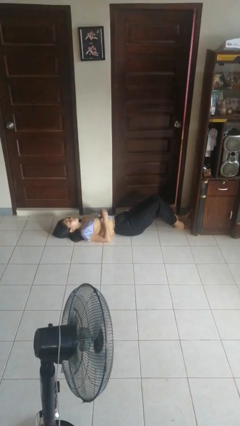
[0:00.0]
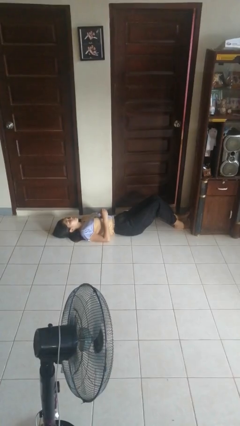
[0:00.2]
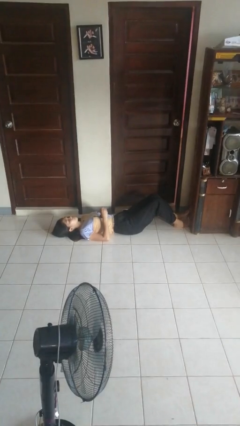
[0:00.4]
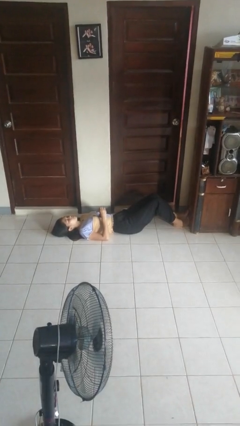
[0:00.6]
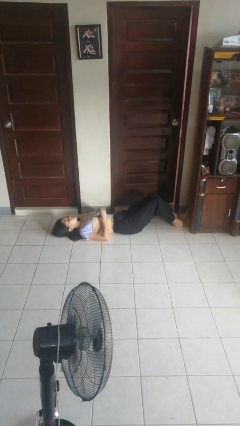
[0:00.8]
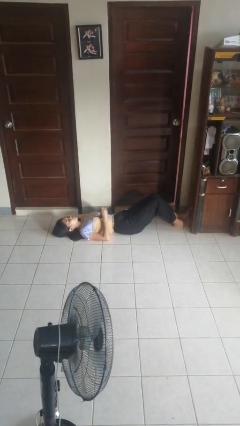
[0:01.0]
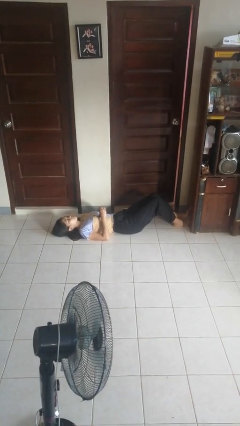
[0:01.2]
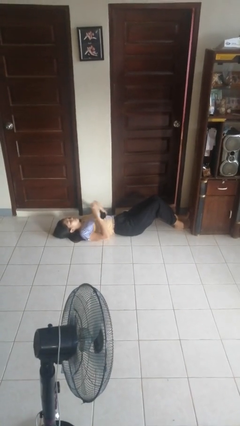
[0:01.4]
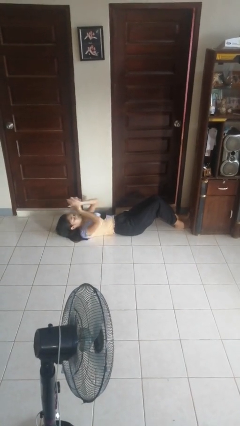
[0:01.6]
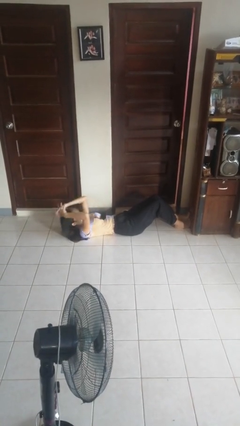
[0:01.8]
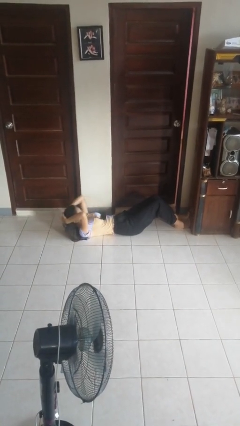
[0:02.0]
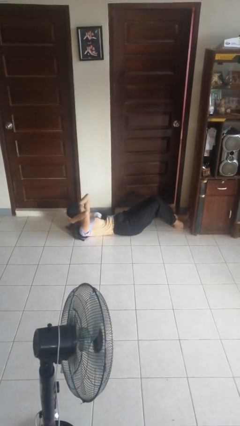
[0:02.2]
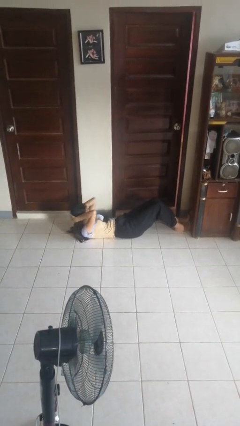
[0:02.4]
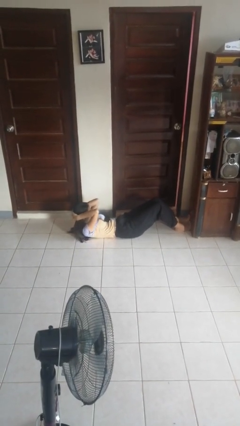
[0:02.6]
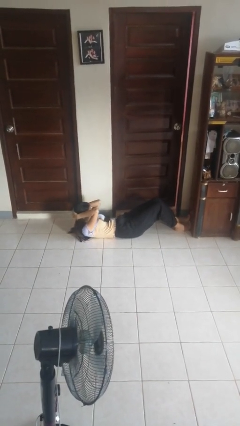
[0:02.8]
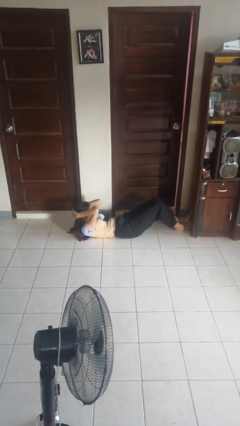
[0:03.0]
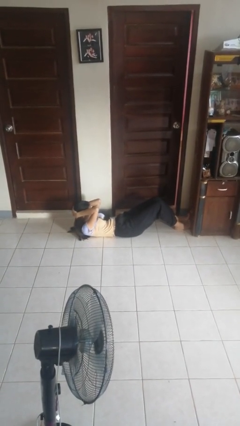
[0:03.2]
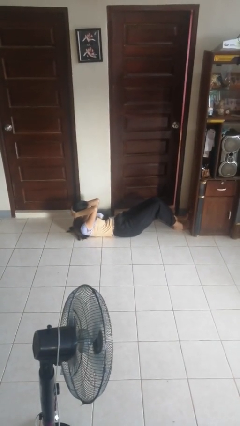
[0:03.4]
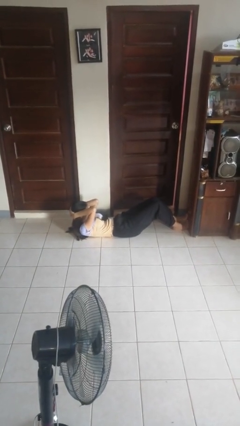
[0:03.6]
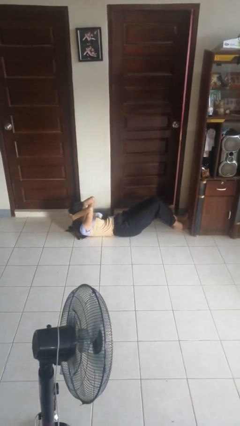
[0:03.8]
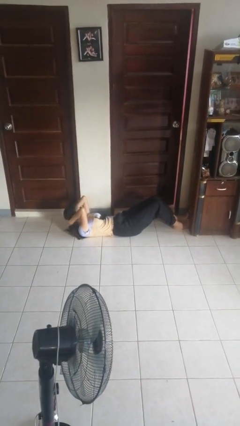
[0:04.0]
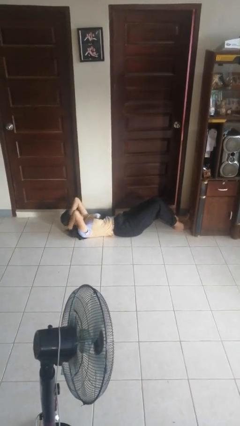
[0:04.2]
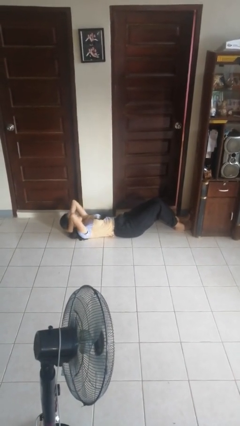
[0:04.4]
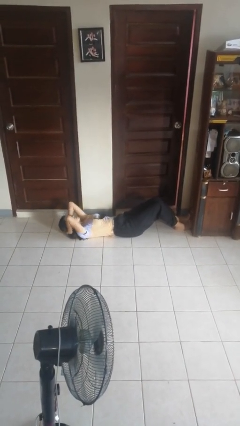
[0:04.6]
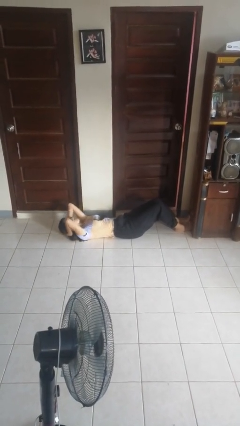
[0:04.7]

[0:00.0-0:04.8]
person exercises with situp

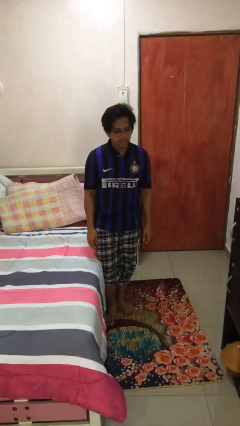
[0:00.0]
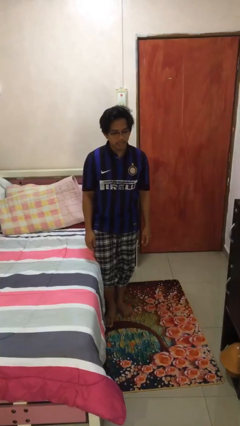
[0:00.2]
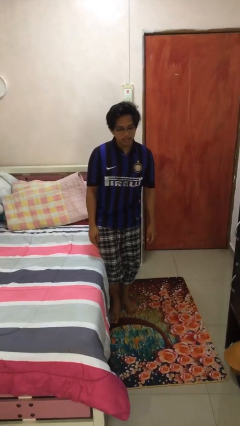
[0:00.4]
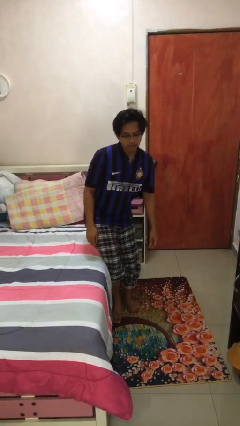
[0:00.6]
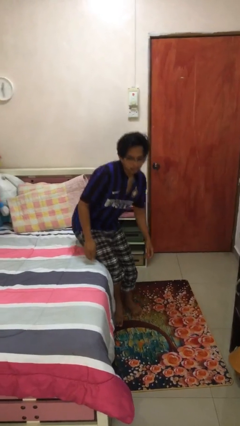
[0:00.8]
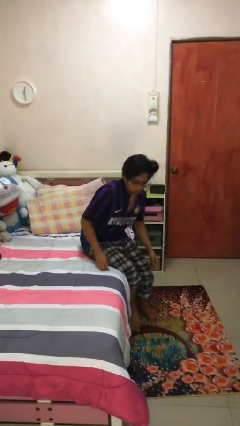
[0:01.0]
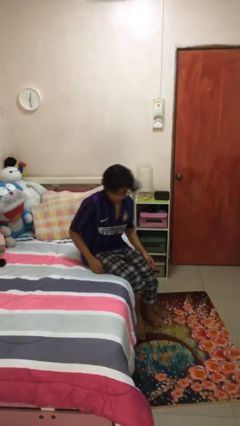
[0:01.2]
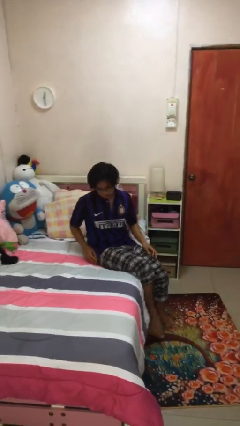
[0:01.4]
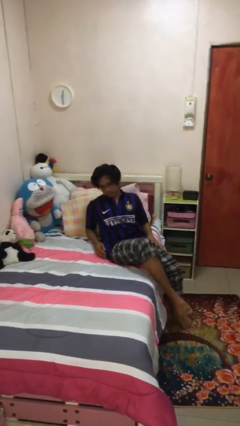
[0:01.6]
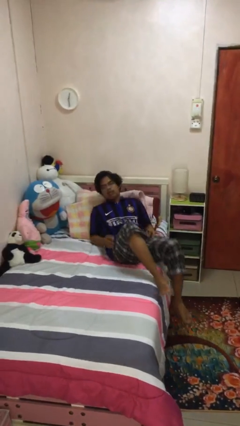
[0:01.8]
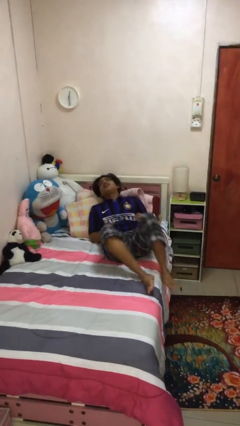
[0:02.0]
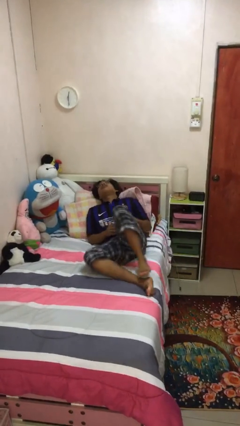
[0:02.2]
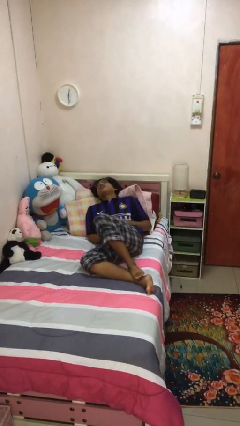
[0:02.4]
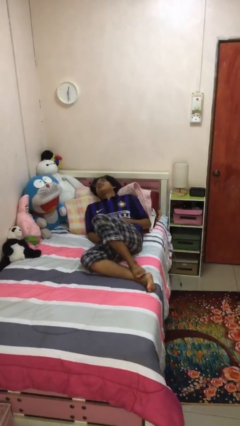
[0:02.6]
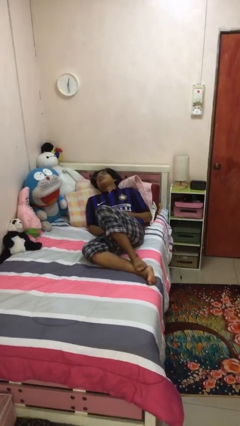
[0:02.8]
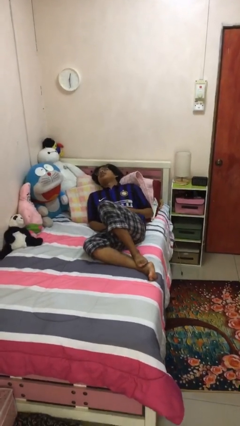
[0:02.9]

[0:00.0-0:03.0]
person lies down on bed

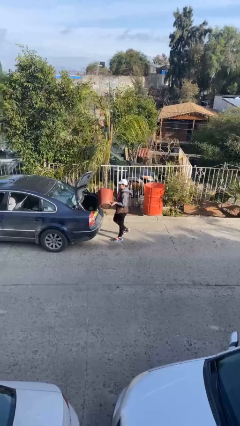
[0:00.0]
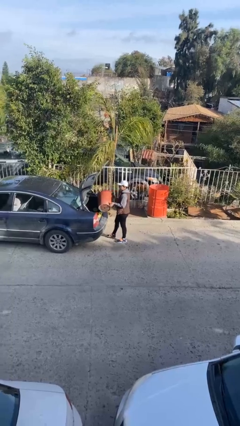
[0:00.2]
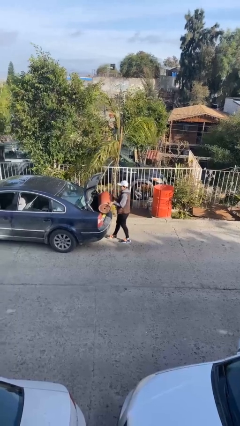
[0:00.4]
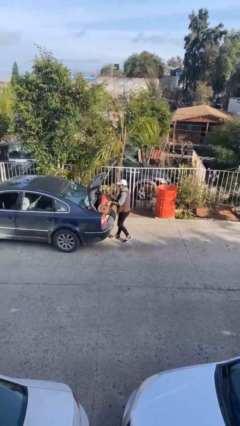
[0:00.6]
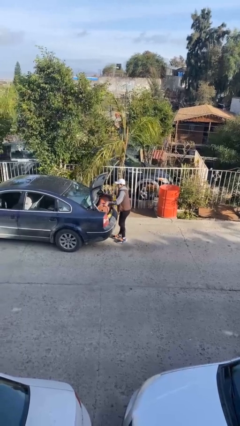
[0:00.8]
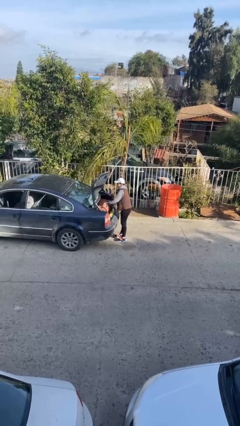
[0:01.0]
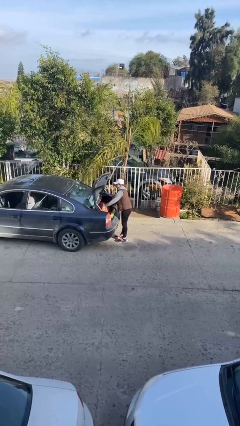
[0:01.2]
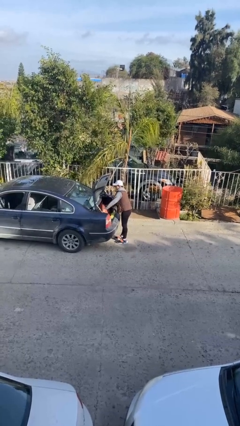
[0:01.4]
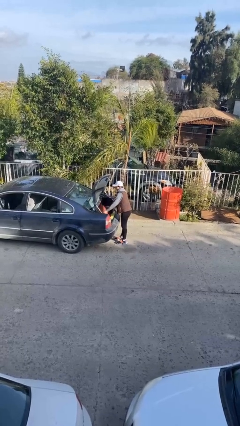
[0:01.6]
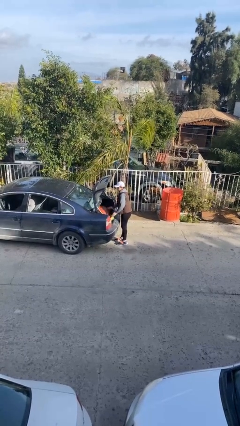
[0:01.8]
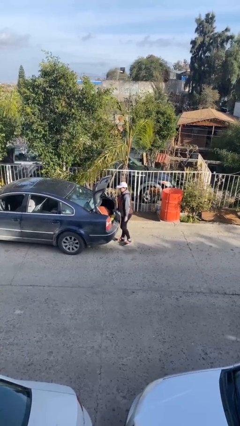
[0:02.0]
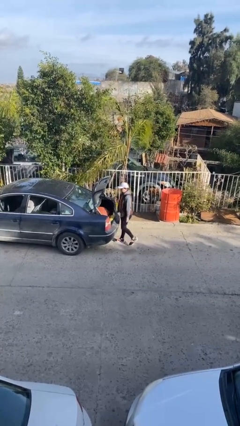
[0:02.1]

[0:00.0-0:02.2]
person loads car

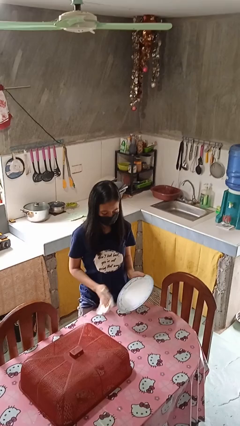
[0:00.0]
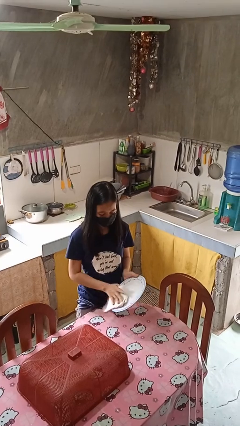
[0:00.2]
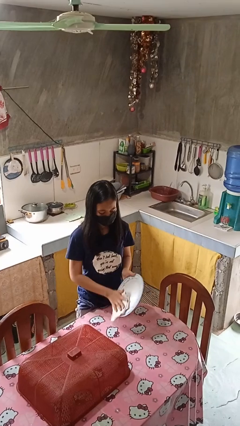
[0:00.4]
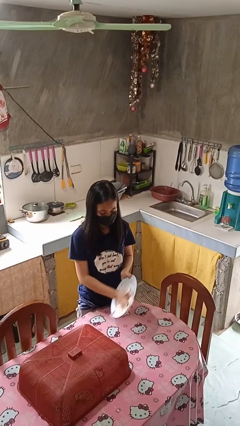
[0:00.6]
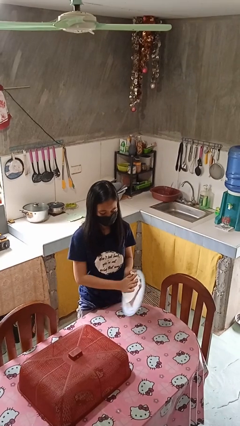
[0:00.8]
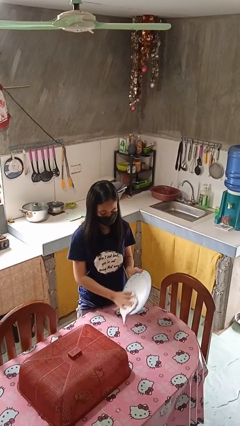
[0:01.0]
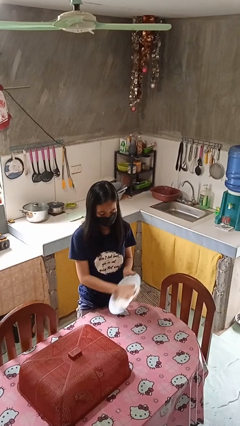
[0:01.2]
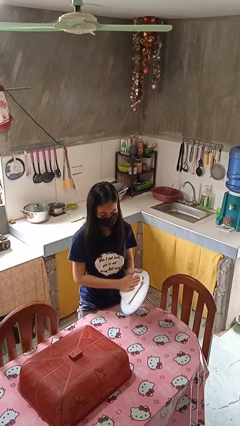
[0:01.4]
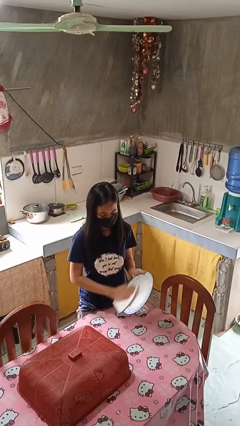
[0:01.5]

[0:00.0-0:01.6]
person dries dish

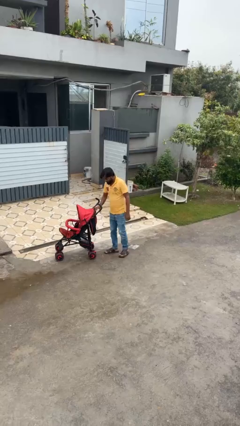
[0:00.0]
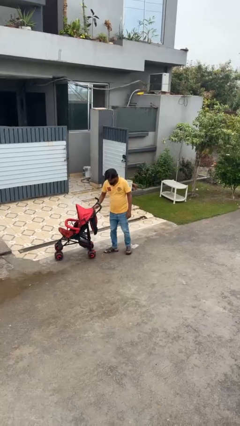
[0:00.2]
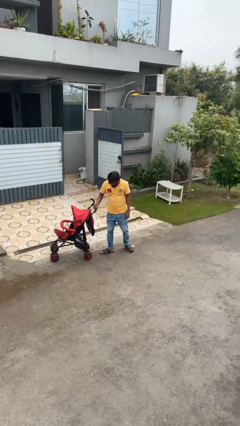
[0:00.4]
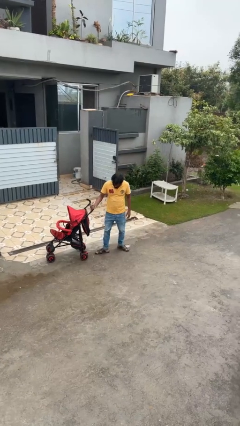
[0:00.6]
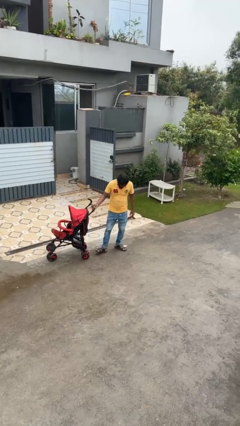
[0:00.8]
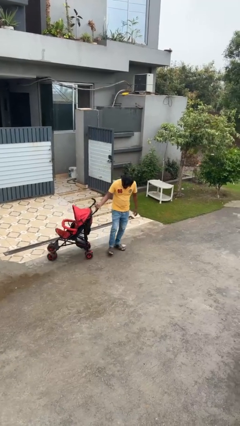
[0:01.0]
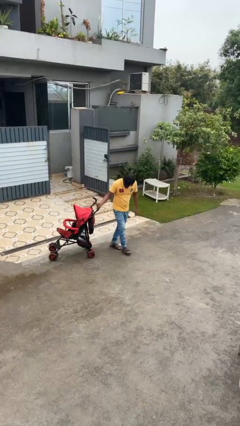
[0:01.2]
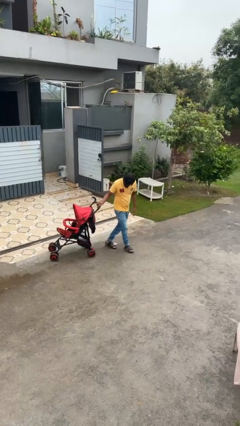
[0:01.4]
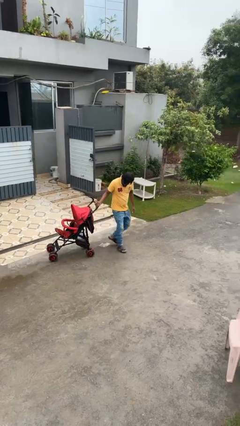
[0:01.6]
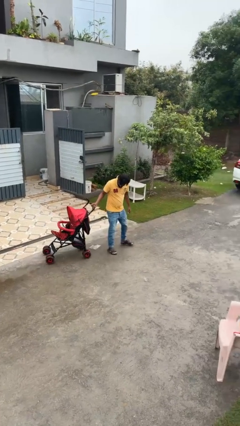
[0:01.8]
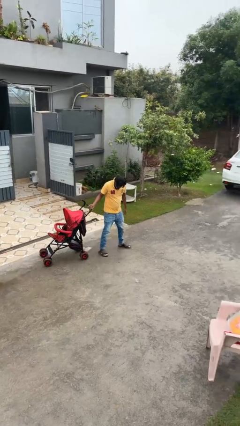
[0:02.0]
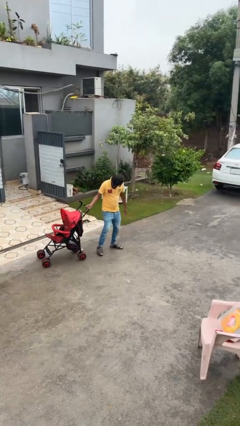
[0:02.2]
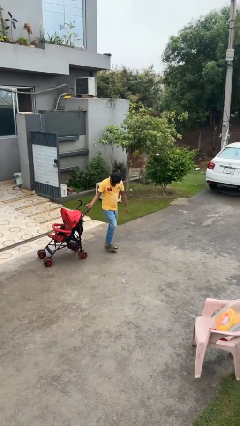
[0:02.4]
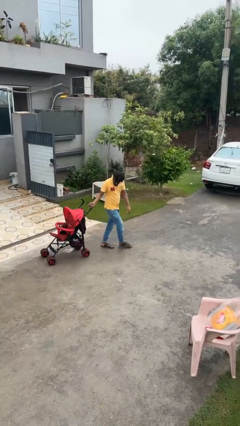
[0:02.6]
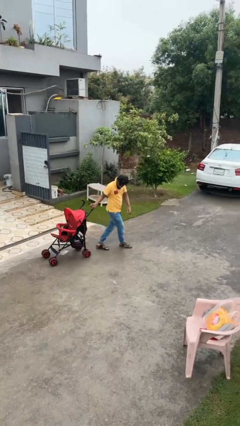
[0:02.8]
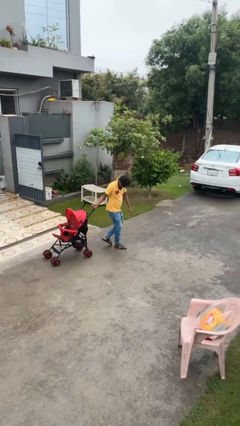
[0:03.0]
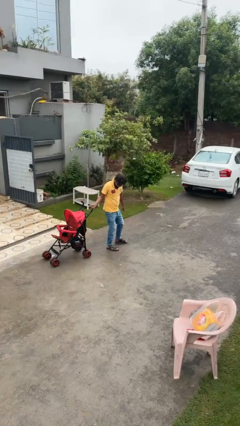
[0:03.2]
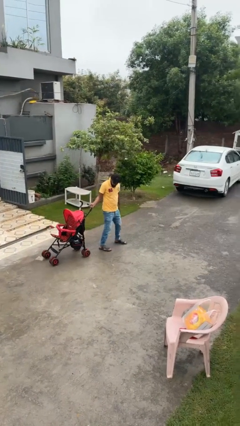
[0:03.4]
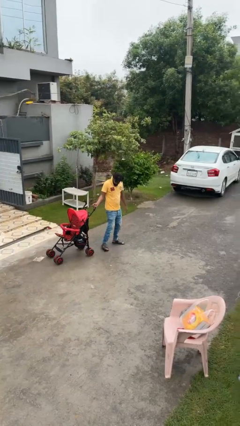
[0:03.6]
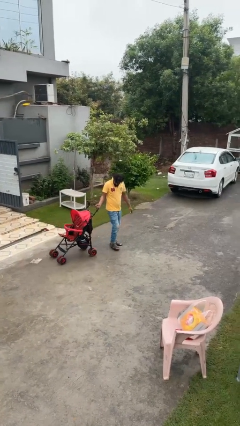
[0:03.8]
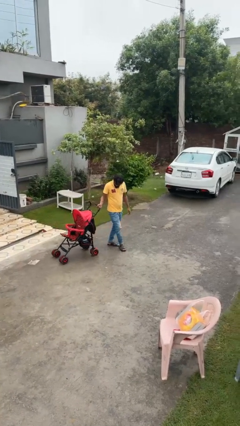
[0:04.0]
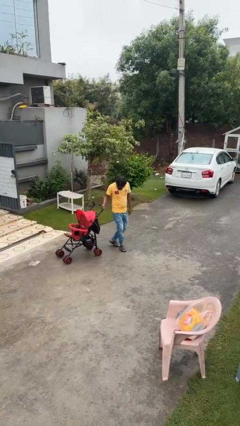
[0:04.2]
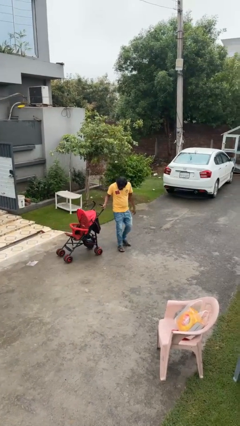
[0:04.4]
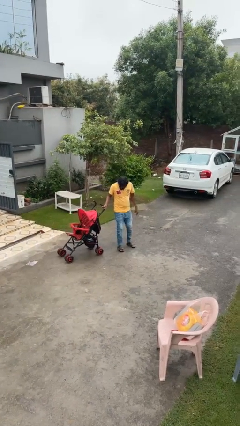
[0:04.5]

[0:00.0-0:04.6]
person pulls wheeled cart

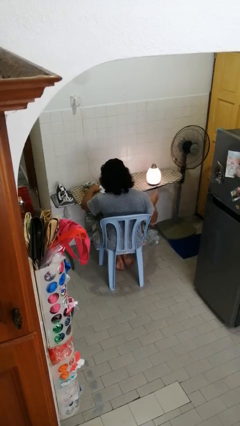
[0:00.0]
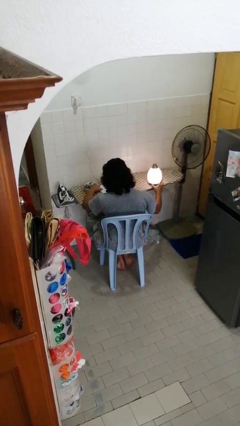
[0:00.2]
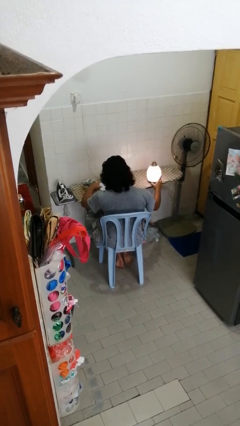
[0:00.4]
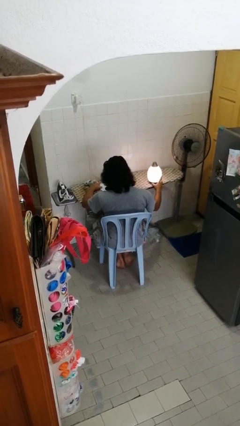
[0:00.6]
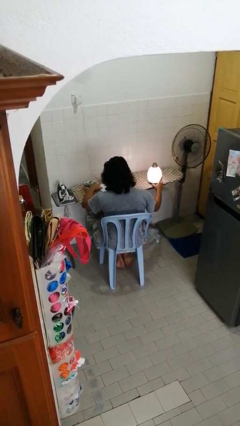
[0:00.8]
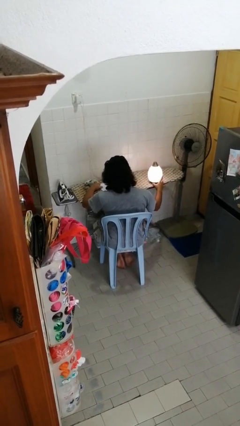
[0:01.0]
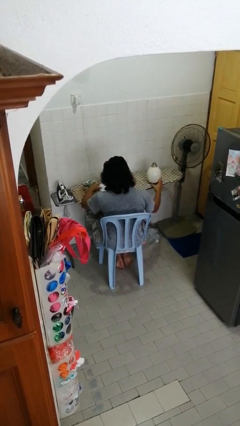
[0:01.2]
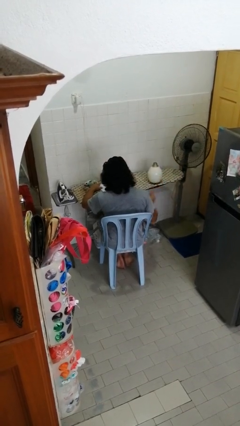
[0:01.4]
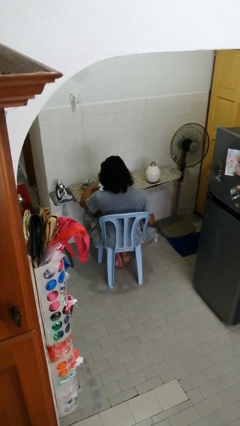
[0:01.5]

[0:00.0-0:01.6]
person turns off lamp
